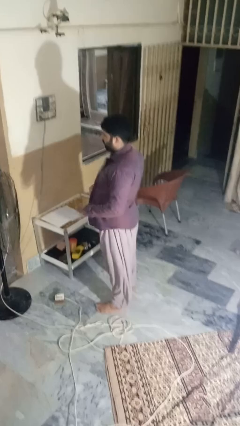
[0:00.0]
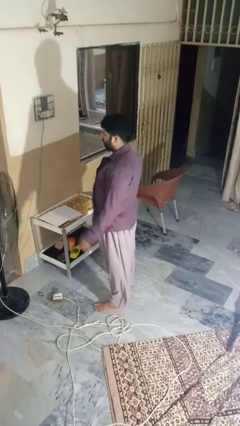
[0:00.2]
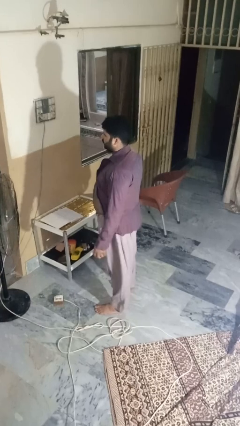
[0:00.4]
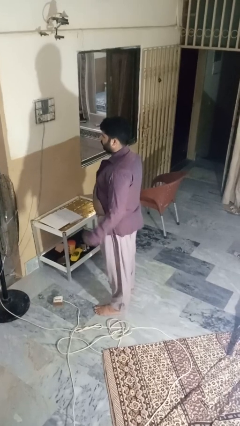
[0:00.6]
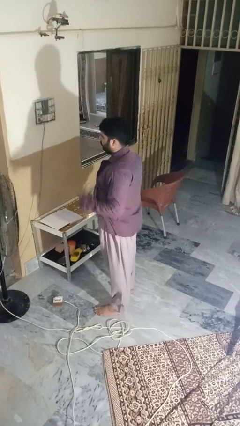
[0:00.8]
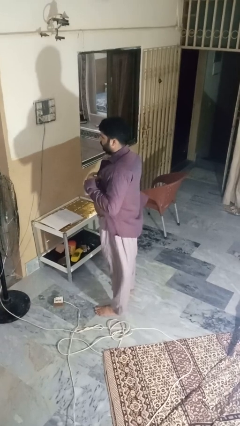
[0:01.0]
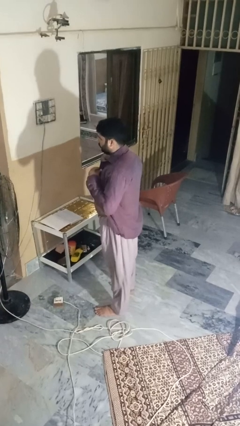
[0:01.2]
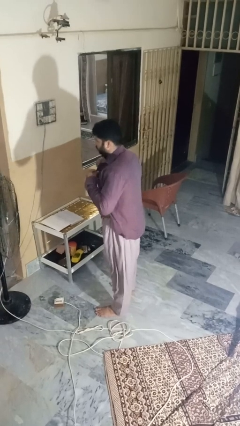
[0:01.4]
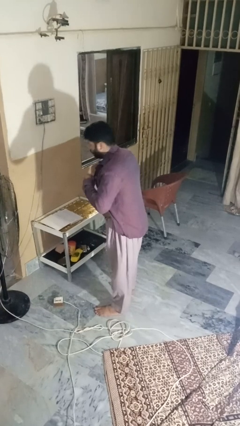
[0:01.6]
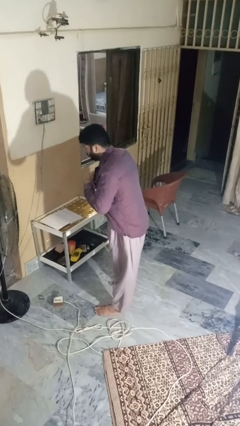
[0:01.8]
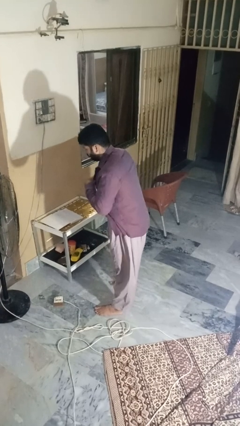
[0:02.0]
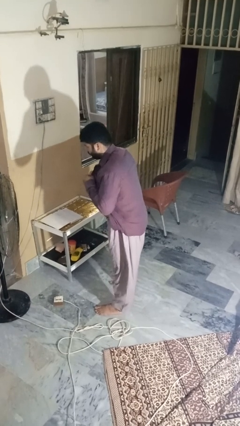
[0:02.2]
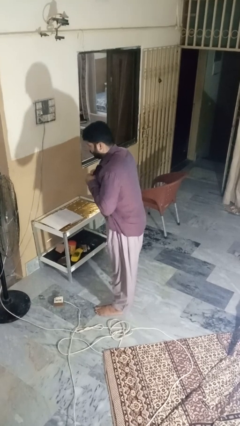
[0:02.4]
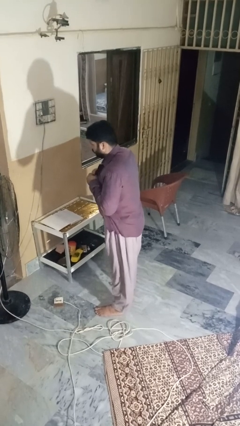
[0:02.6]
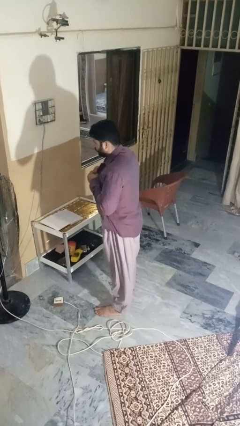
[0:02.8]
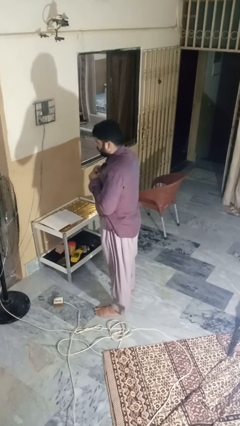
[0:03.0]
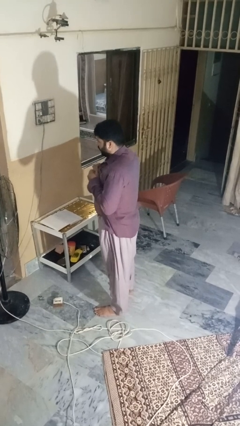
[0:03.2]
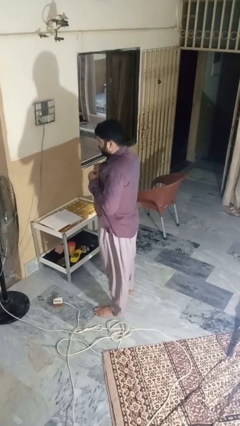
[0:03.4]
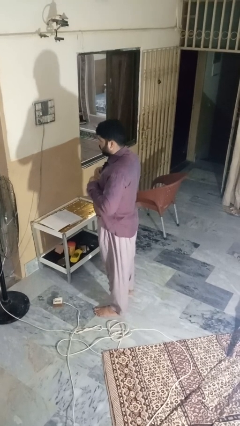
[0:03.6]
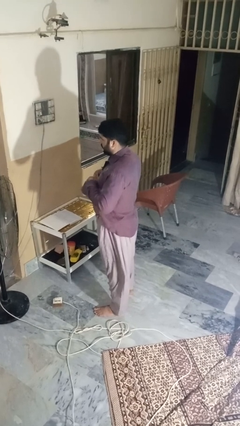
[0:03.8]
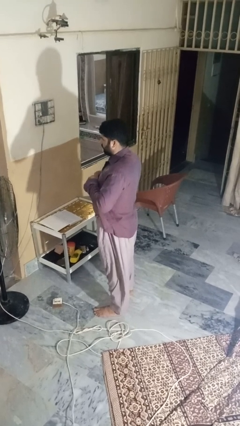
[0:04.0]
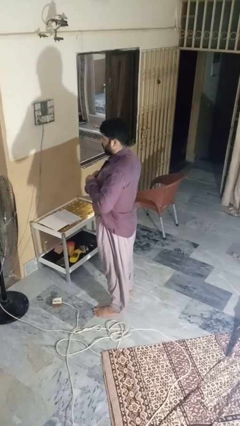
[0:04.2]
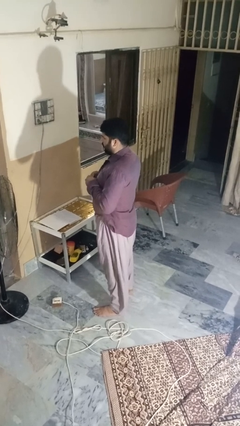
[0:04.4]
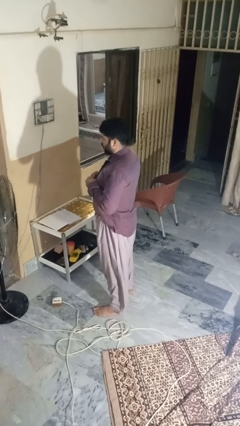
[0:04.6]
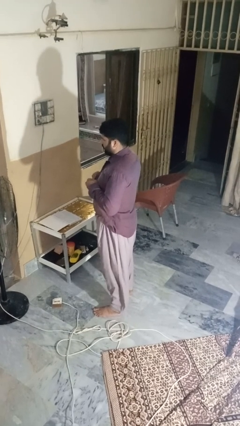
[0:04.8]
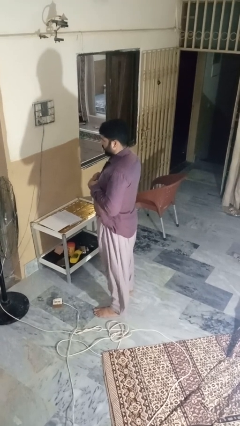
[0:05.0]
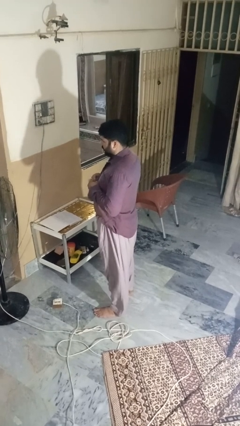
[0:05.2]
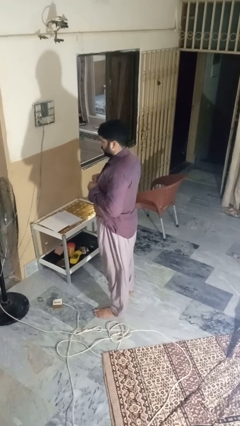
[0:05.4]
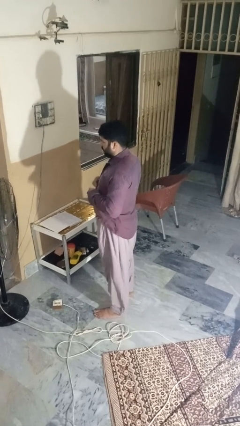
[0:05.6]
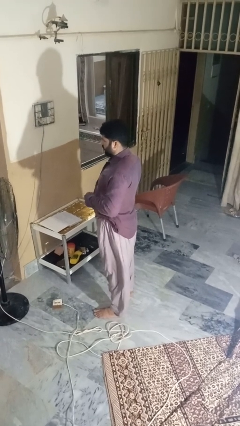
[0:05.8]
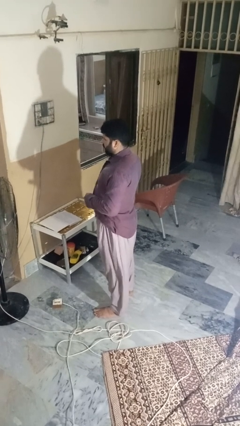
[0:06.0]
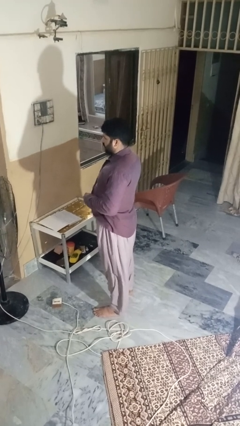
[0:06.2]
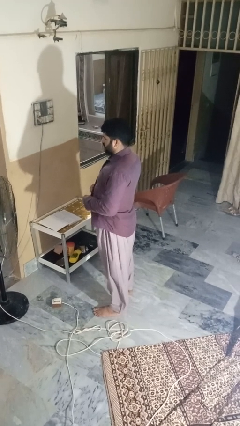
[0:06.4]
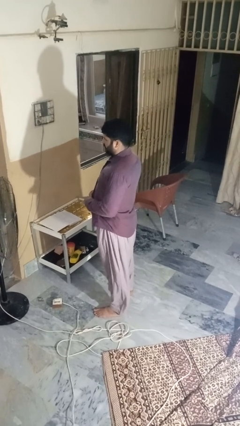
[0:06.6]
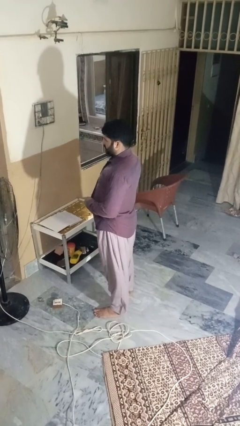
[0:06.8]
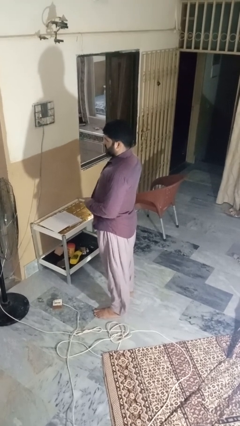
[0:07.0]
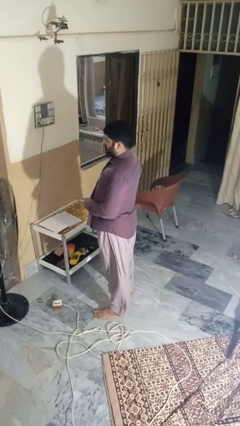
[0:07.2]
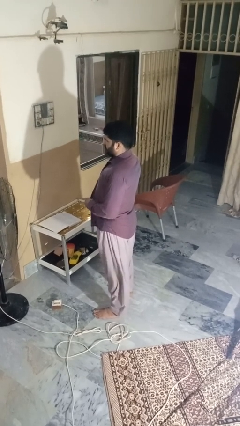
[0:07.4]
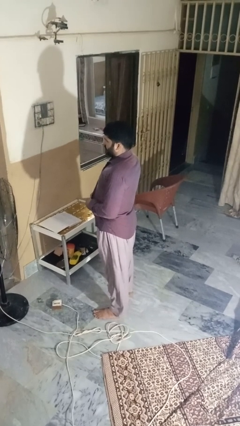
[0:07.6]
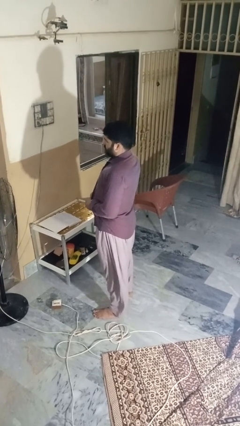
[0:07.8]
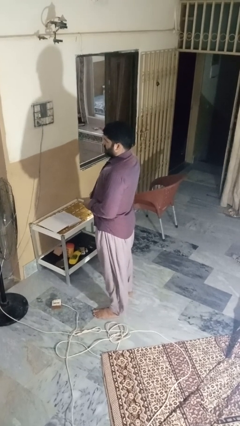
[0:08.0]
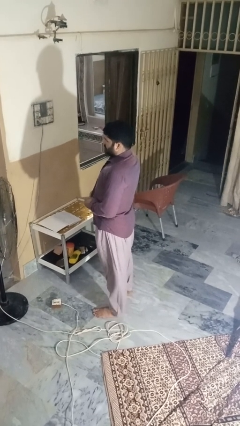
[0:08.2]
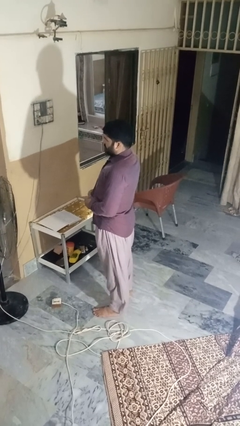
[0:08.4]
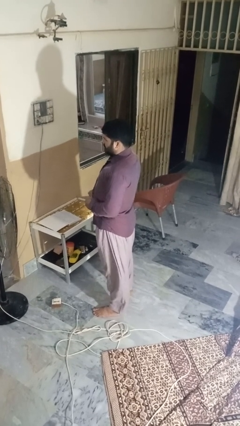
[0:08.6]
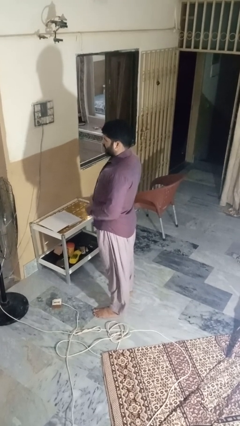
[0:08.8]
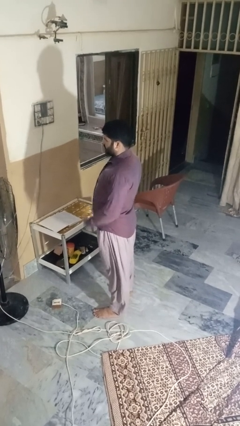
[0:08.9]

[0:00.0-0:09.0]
person buttons shirt

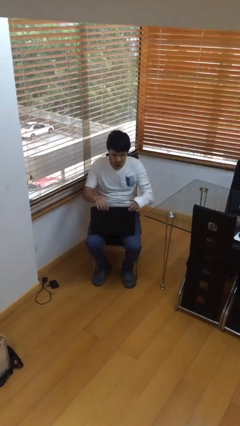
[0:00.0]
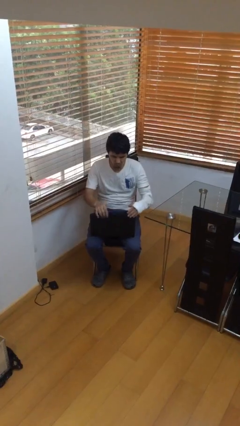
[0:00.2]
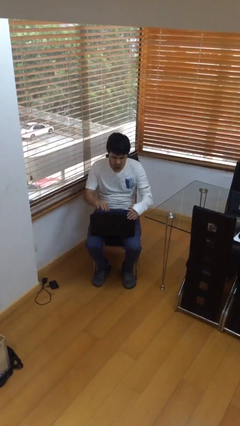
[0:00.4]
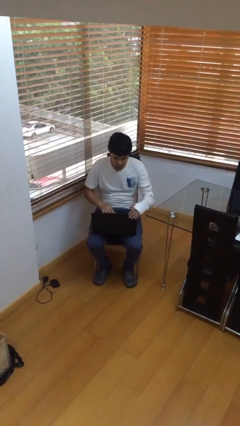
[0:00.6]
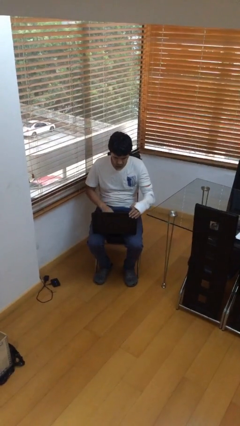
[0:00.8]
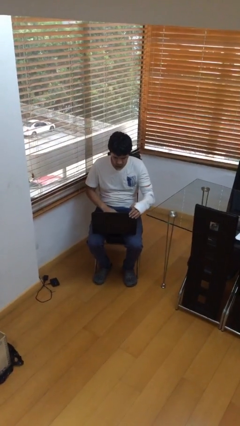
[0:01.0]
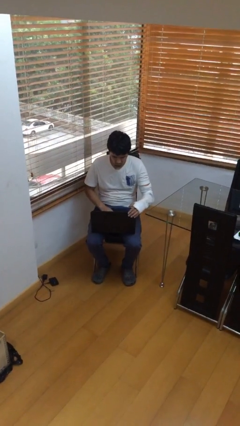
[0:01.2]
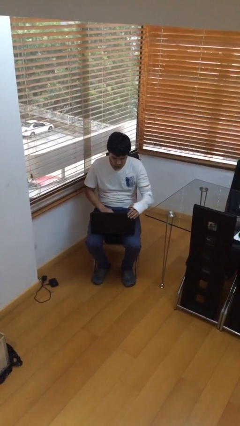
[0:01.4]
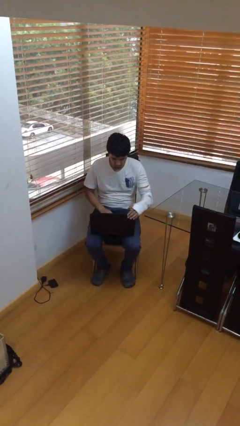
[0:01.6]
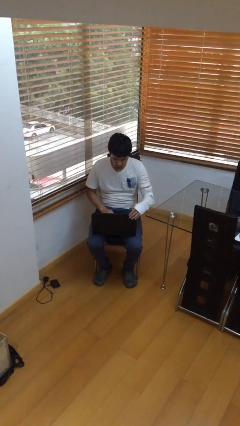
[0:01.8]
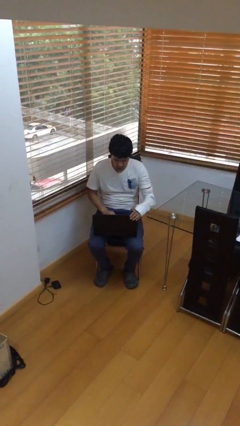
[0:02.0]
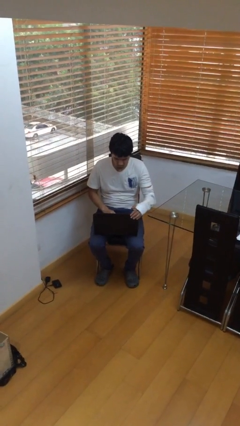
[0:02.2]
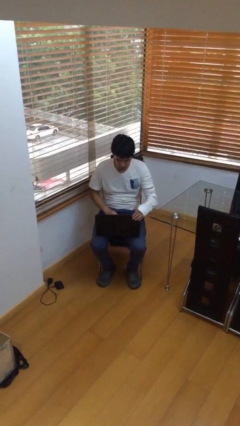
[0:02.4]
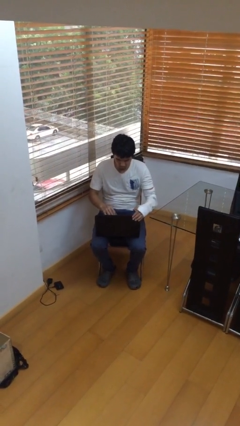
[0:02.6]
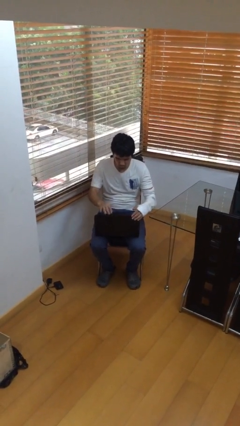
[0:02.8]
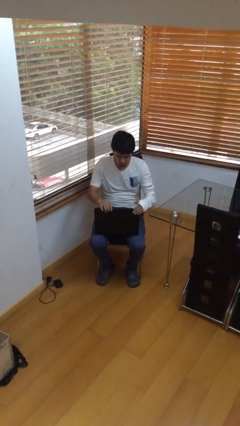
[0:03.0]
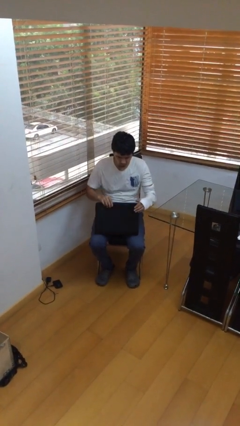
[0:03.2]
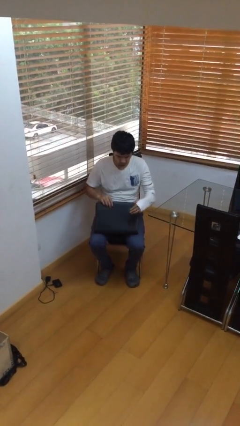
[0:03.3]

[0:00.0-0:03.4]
person interacts with laptop

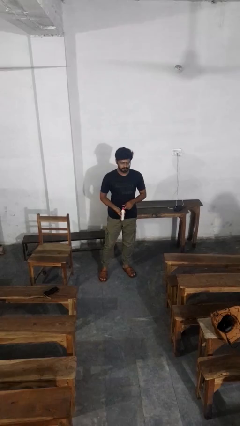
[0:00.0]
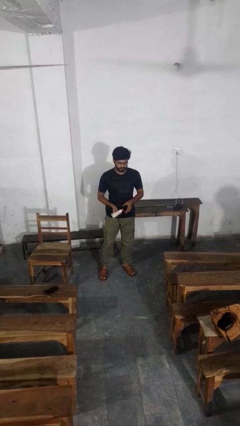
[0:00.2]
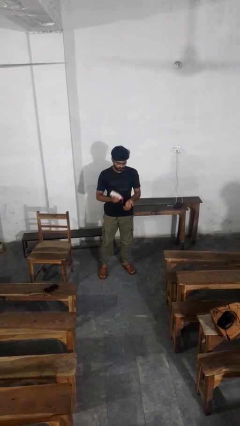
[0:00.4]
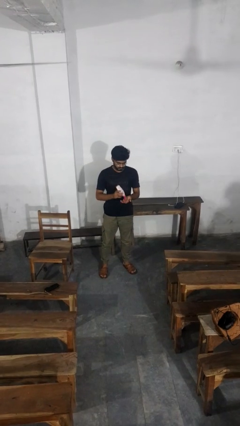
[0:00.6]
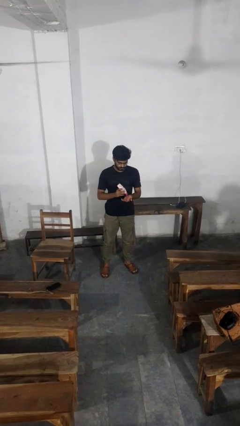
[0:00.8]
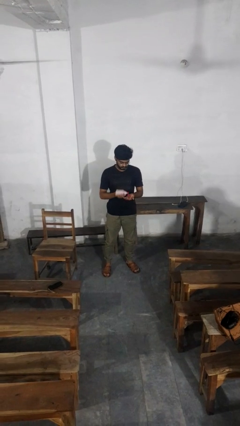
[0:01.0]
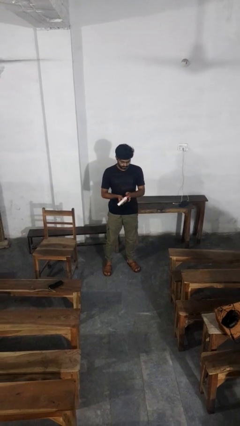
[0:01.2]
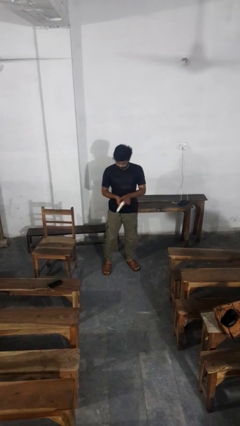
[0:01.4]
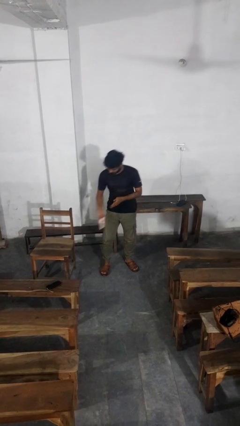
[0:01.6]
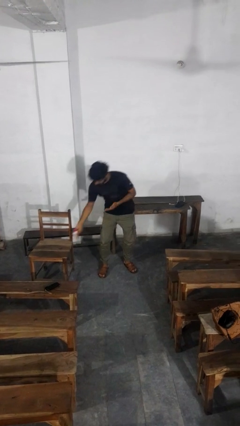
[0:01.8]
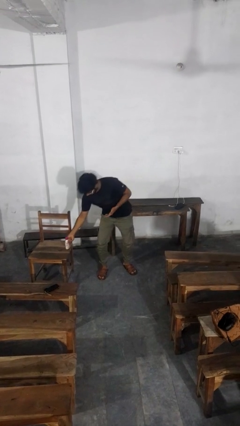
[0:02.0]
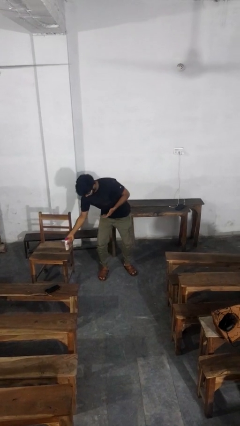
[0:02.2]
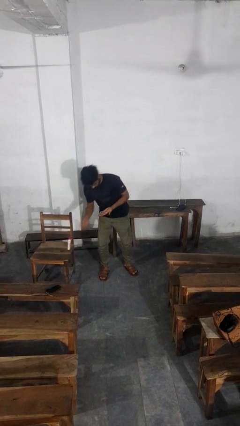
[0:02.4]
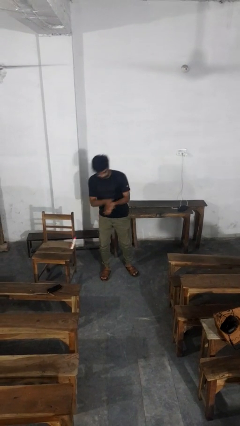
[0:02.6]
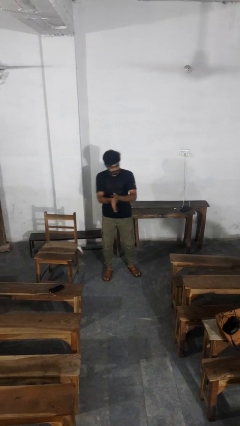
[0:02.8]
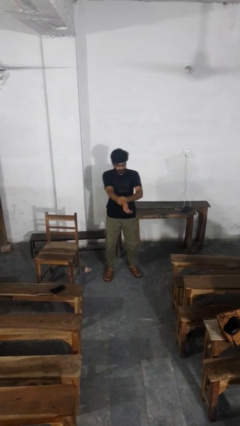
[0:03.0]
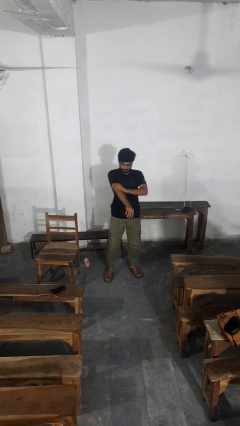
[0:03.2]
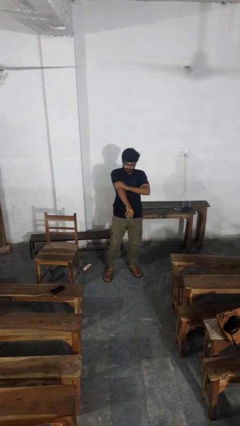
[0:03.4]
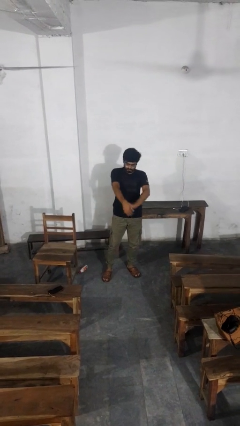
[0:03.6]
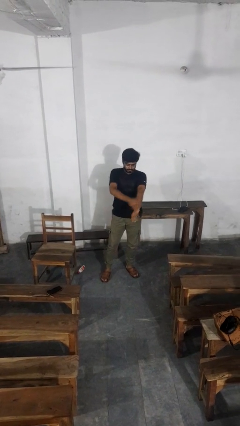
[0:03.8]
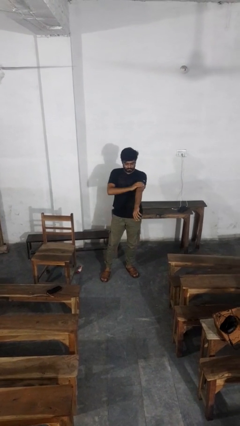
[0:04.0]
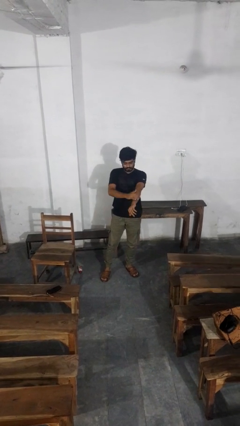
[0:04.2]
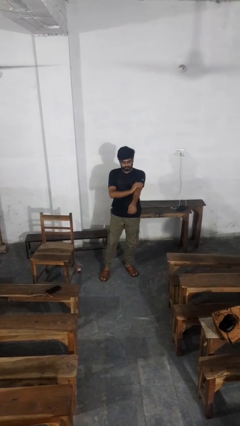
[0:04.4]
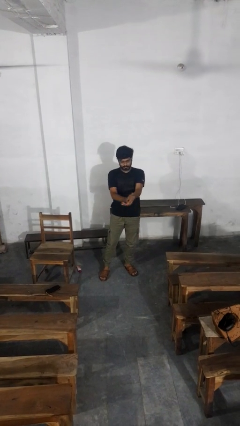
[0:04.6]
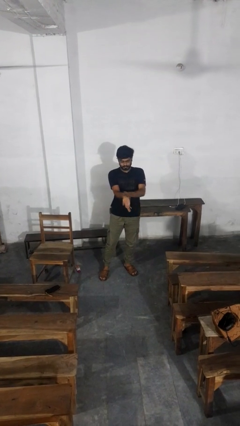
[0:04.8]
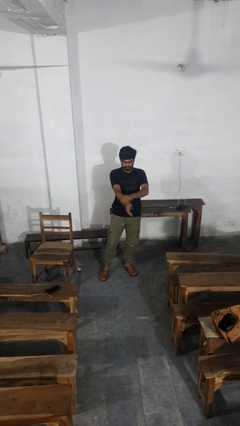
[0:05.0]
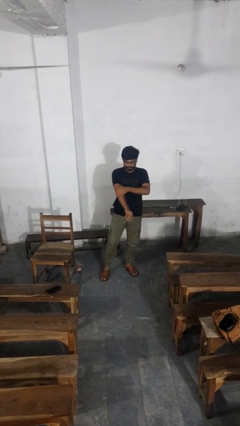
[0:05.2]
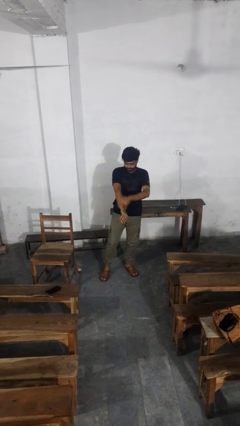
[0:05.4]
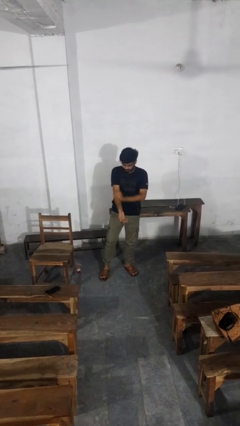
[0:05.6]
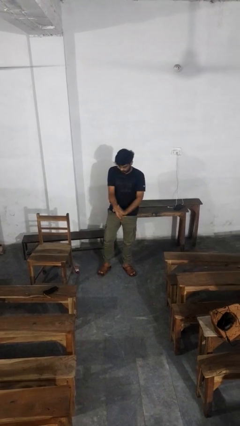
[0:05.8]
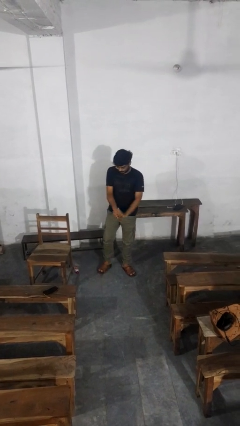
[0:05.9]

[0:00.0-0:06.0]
person applies sunscreen
